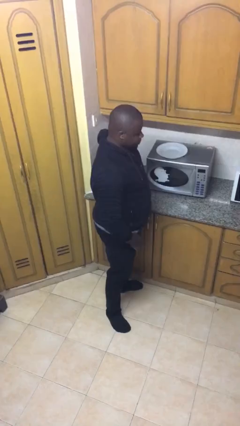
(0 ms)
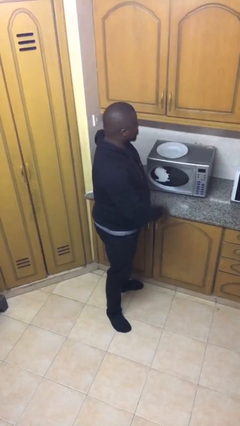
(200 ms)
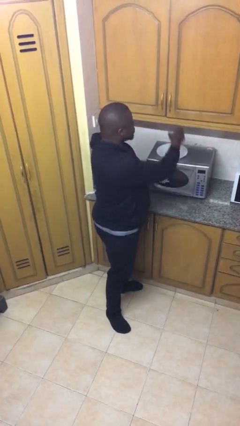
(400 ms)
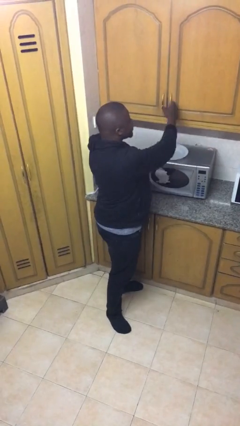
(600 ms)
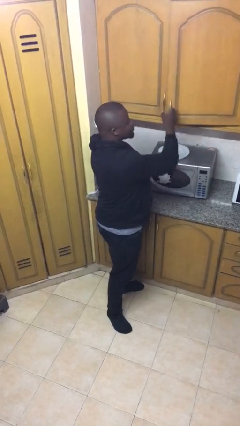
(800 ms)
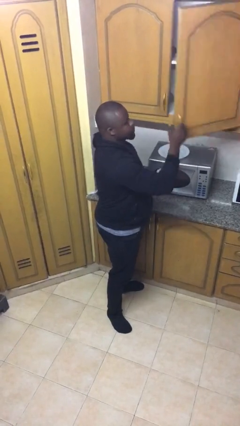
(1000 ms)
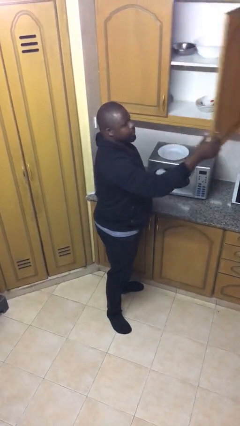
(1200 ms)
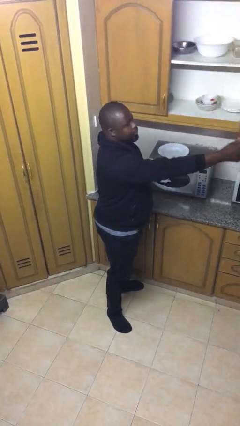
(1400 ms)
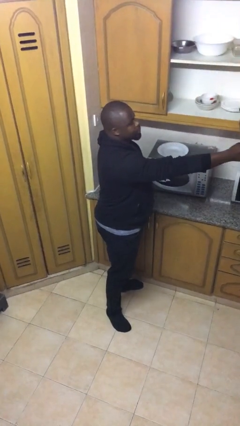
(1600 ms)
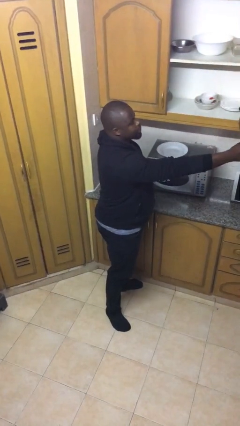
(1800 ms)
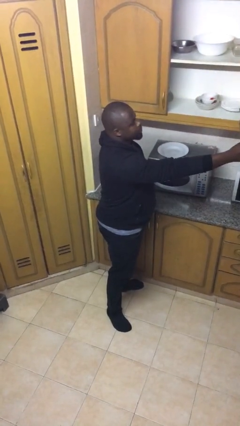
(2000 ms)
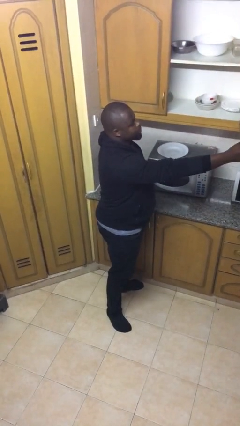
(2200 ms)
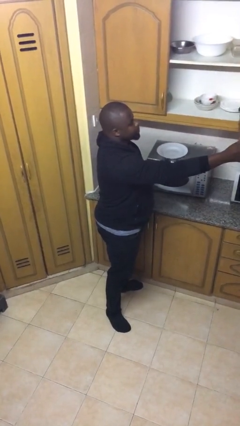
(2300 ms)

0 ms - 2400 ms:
person opens cabinet

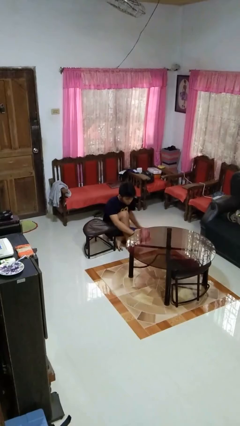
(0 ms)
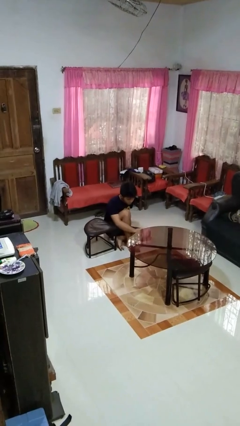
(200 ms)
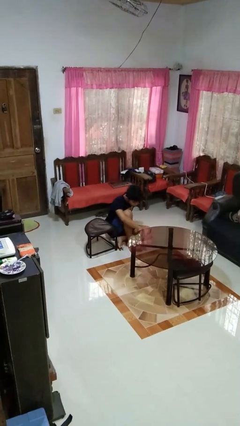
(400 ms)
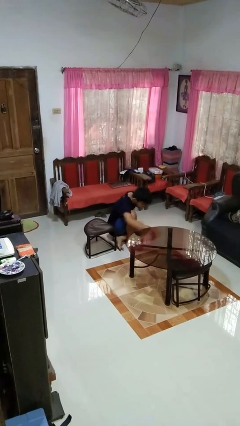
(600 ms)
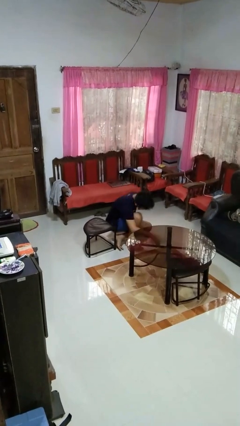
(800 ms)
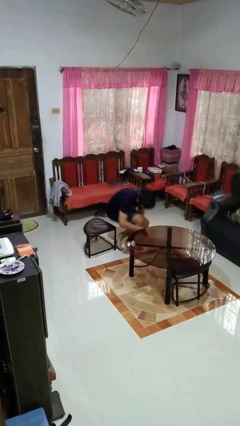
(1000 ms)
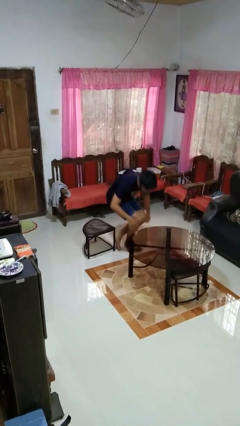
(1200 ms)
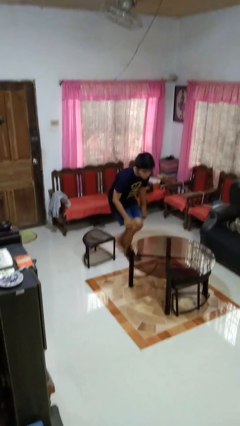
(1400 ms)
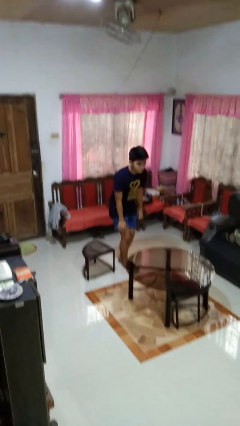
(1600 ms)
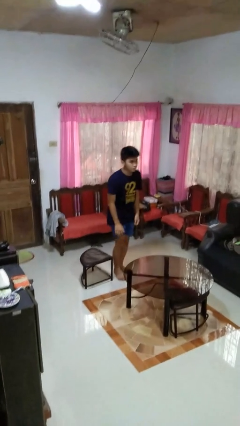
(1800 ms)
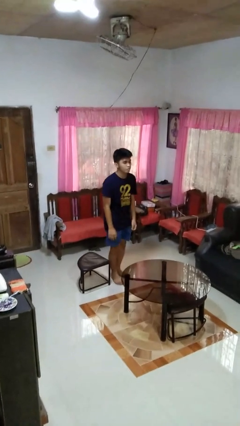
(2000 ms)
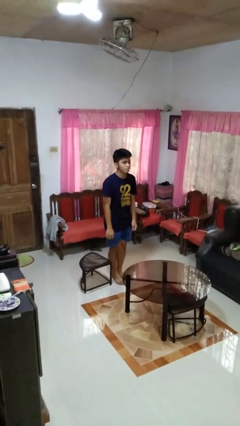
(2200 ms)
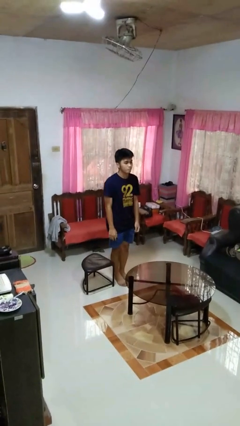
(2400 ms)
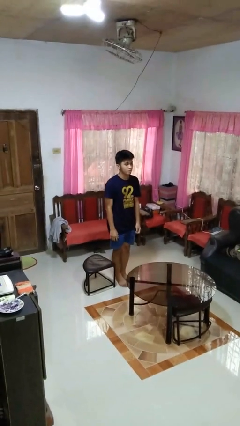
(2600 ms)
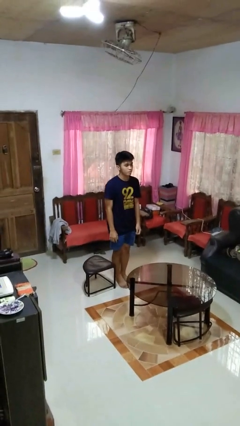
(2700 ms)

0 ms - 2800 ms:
person stands up from floor

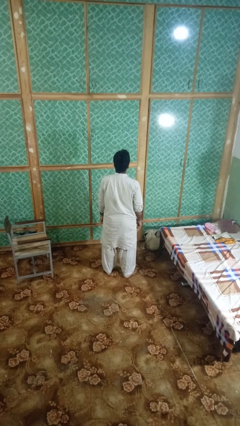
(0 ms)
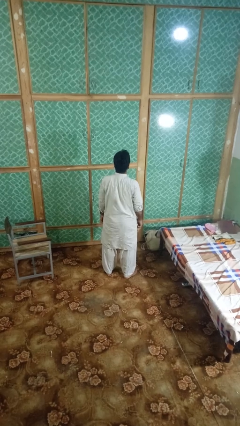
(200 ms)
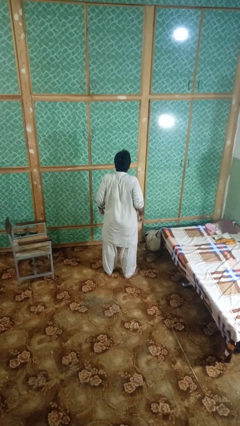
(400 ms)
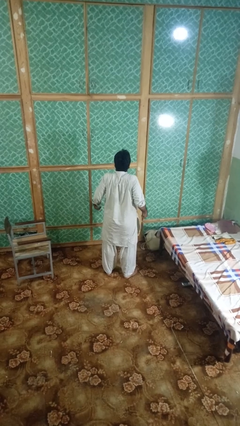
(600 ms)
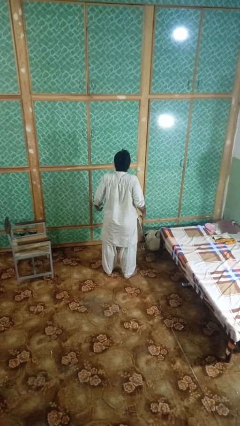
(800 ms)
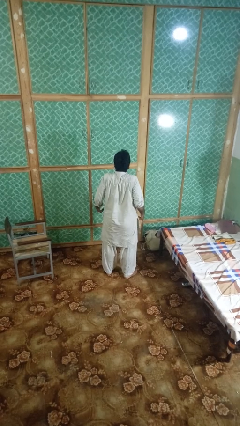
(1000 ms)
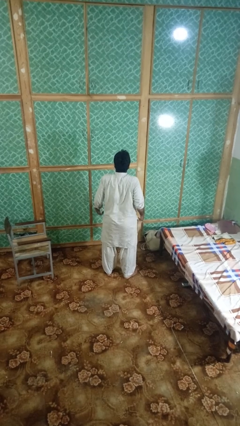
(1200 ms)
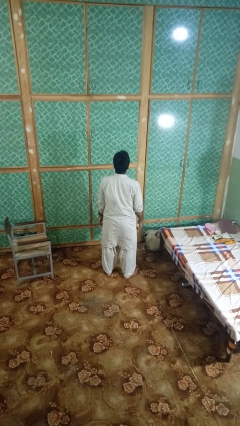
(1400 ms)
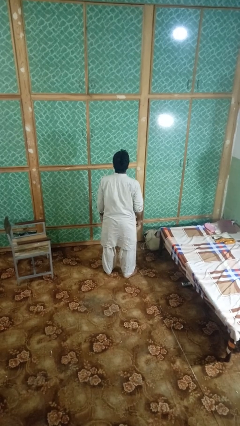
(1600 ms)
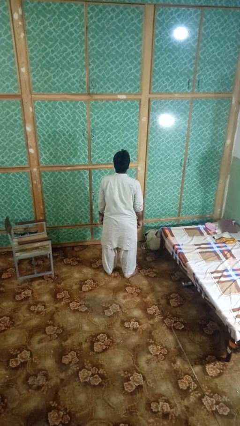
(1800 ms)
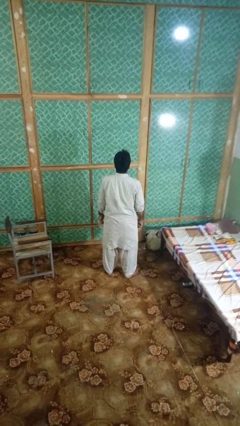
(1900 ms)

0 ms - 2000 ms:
person shrugs

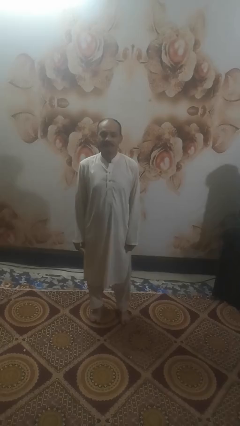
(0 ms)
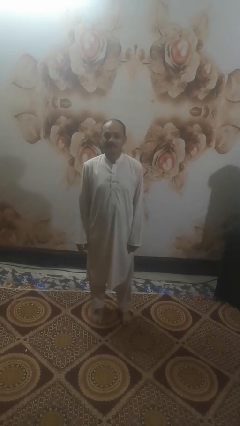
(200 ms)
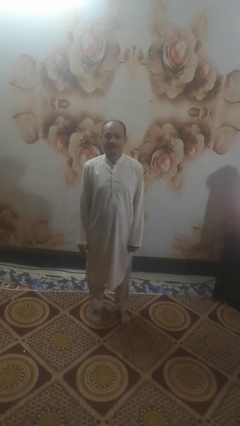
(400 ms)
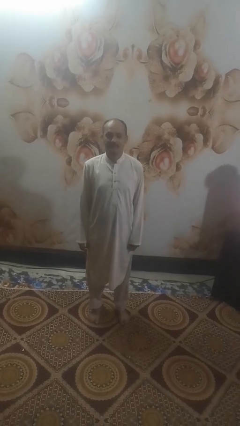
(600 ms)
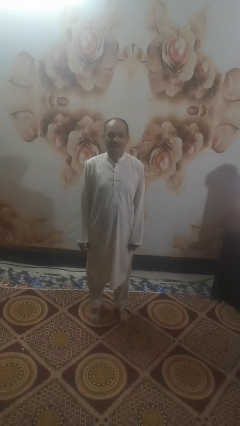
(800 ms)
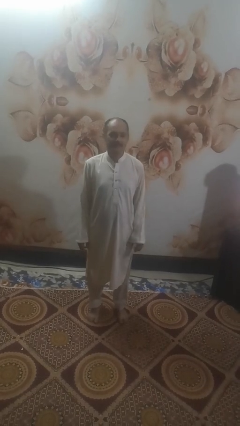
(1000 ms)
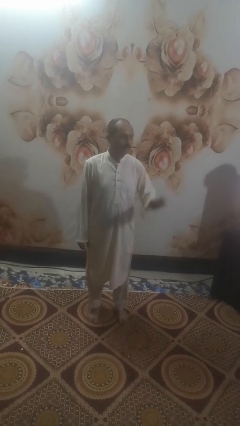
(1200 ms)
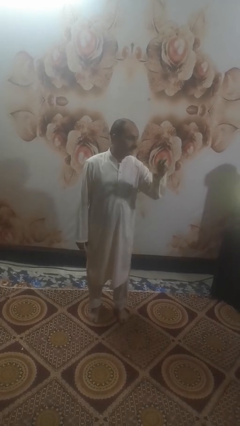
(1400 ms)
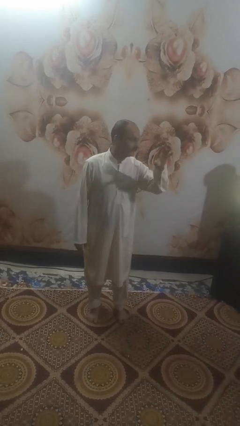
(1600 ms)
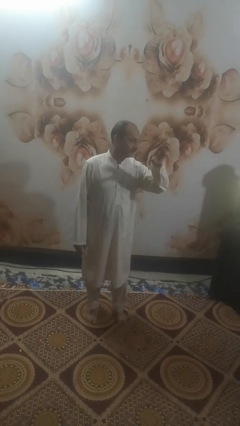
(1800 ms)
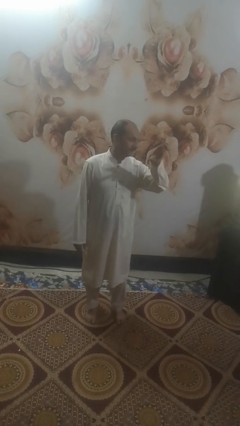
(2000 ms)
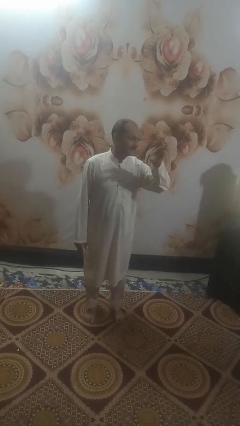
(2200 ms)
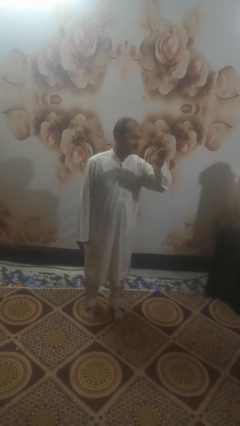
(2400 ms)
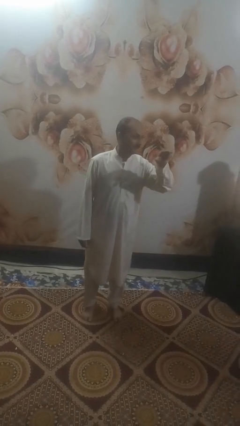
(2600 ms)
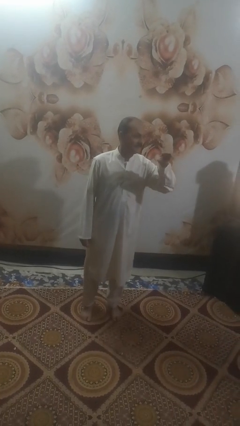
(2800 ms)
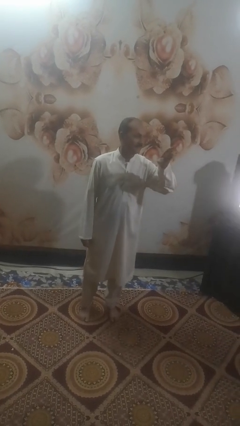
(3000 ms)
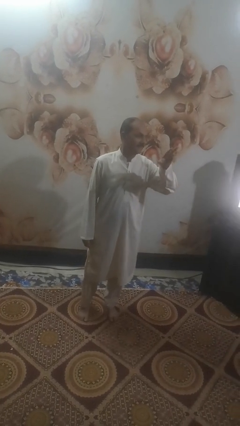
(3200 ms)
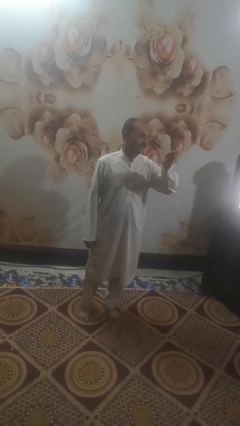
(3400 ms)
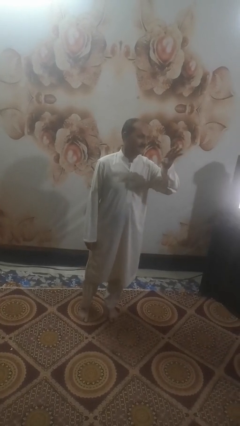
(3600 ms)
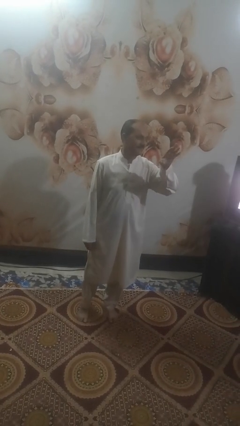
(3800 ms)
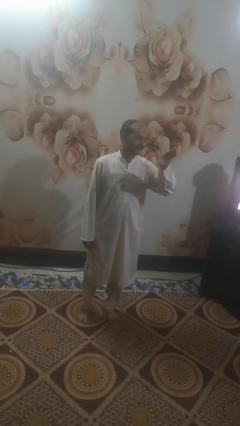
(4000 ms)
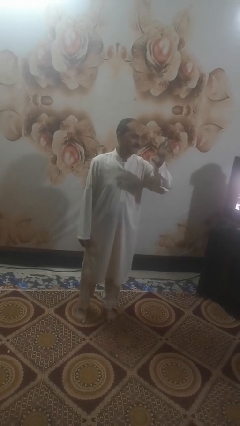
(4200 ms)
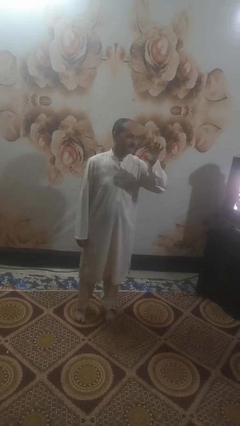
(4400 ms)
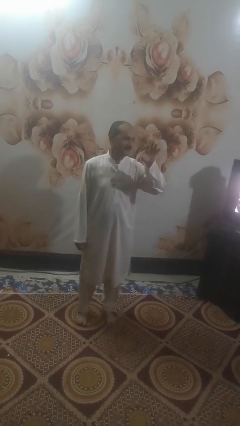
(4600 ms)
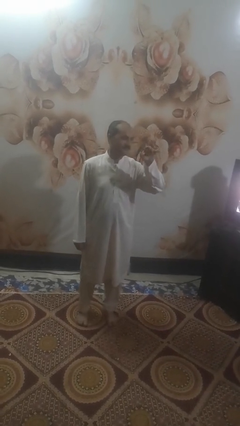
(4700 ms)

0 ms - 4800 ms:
person gestures come here

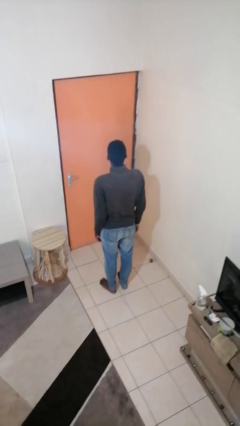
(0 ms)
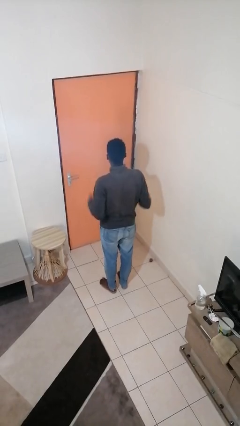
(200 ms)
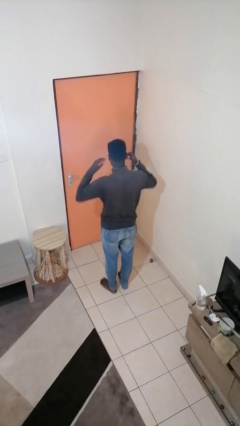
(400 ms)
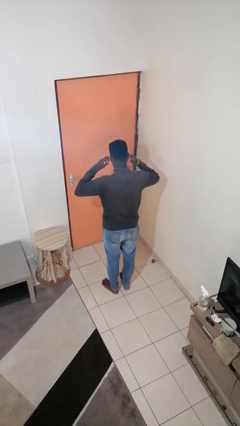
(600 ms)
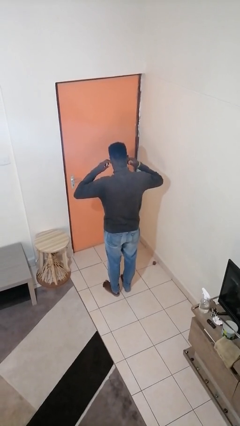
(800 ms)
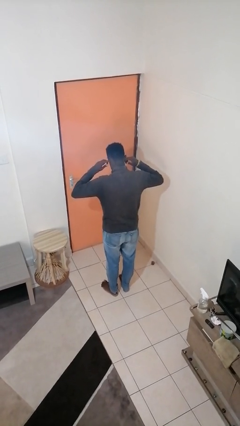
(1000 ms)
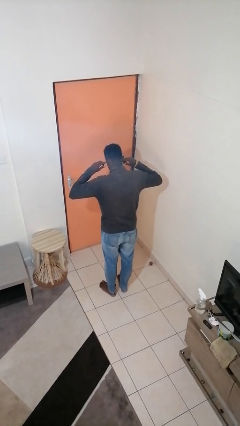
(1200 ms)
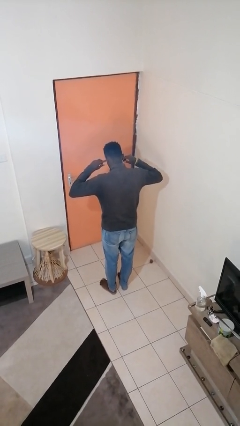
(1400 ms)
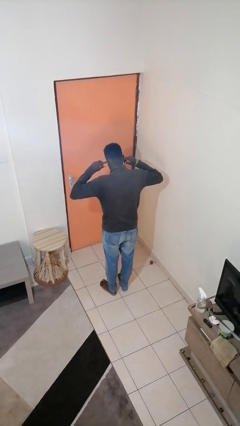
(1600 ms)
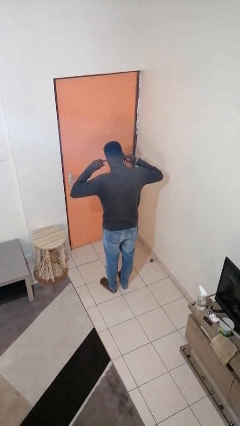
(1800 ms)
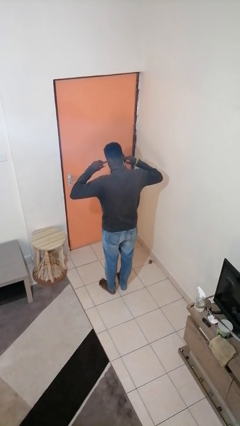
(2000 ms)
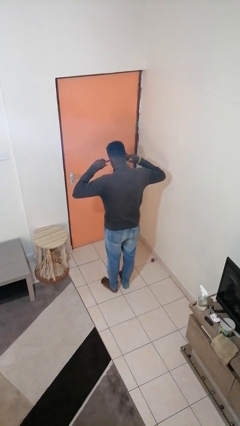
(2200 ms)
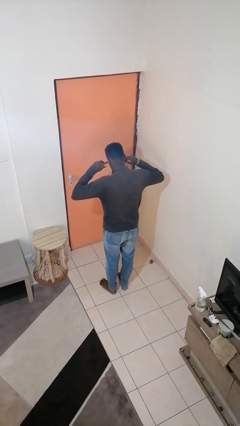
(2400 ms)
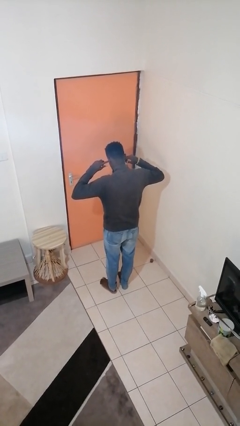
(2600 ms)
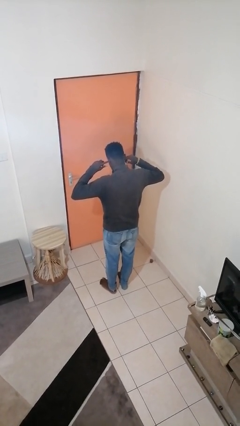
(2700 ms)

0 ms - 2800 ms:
person puts fingers in ear

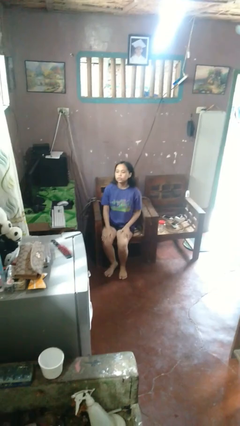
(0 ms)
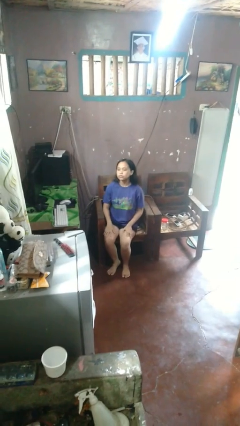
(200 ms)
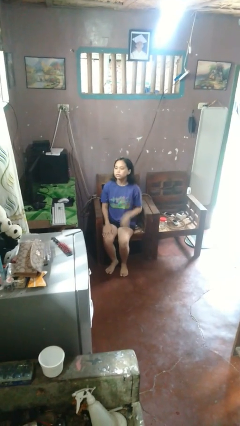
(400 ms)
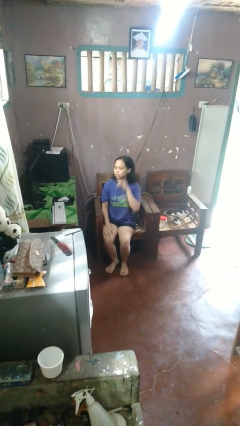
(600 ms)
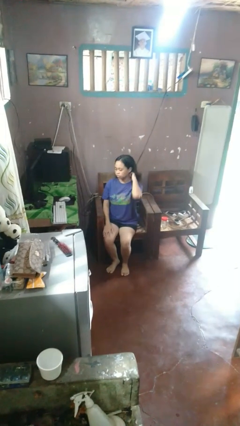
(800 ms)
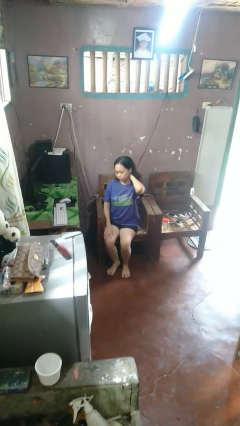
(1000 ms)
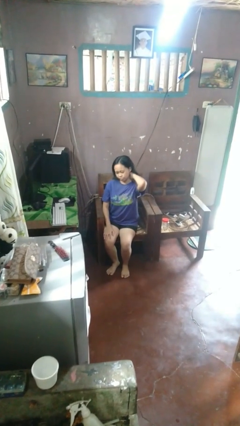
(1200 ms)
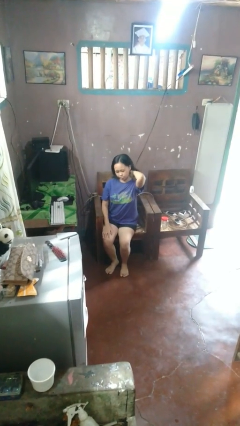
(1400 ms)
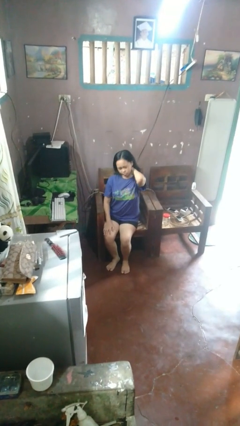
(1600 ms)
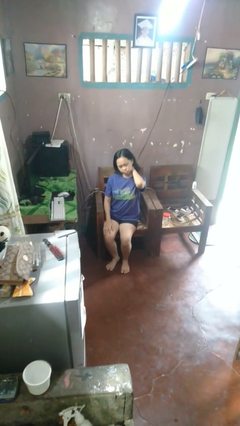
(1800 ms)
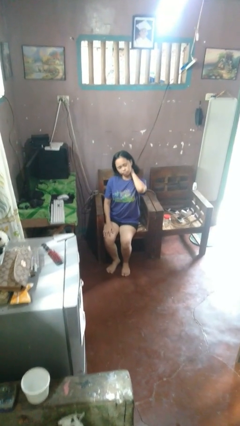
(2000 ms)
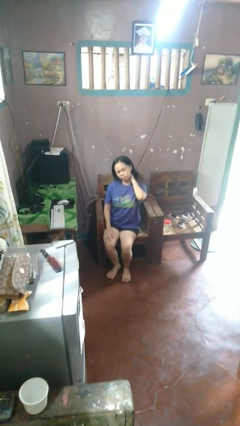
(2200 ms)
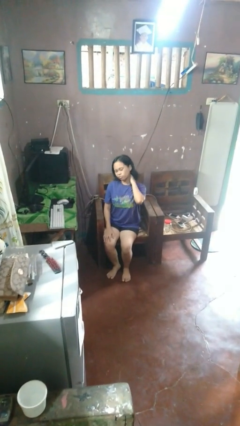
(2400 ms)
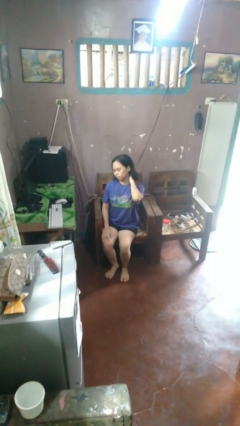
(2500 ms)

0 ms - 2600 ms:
person rubs neck

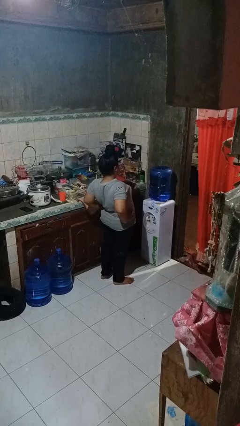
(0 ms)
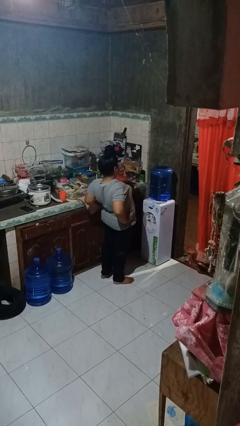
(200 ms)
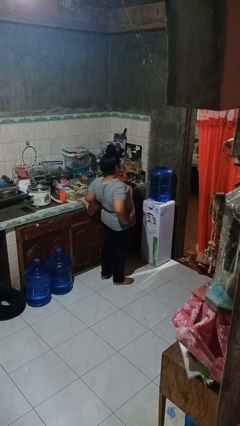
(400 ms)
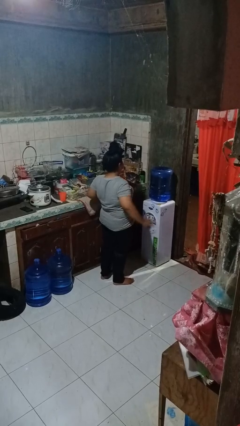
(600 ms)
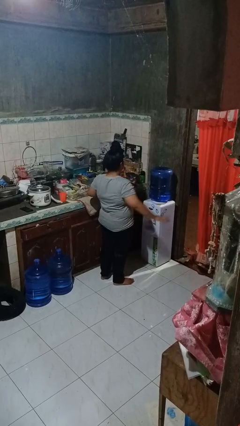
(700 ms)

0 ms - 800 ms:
person stretches back
